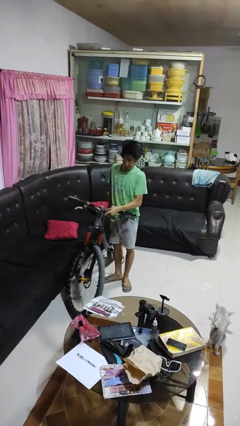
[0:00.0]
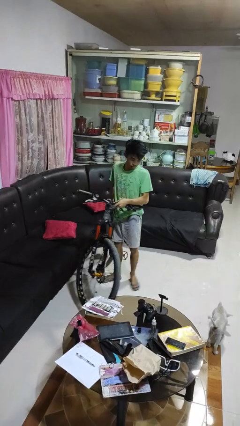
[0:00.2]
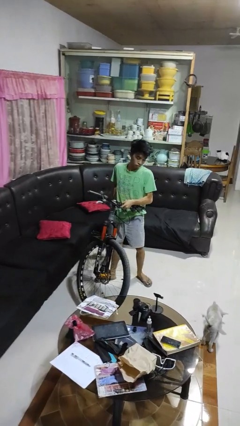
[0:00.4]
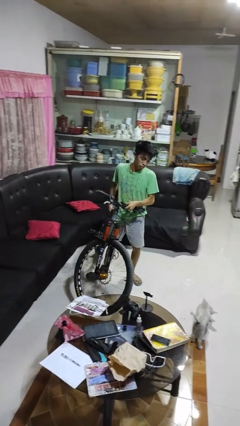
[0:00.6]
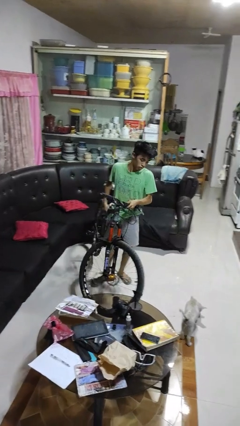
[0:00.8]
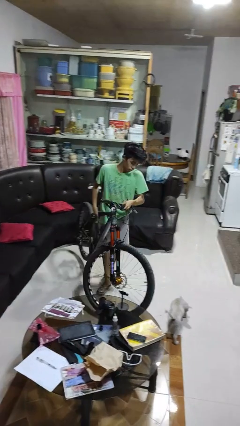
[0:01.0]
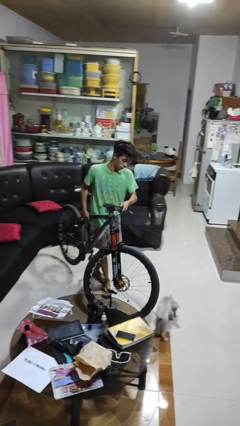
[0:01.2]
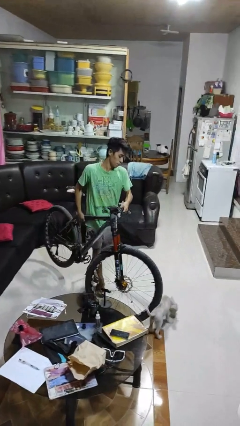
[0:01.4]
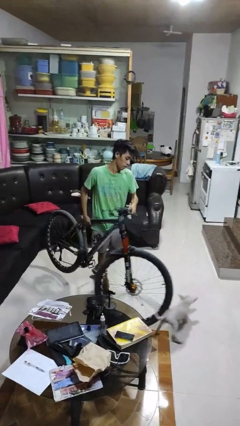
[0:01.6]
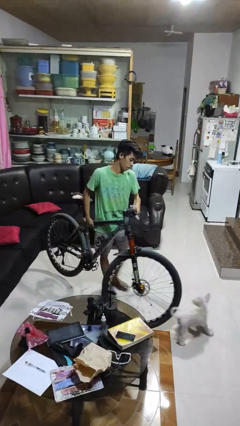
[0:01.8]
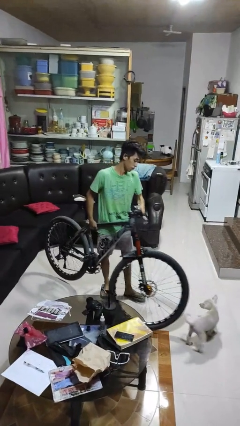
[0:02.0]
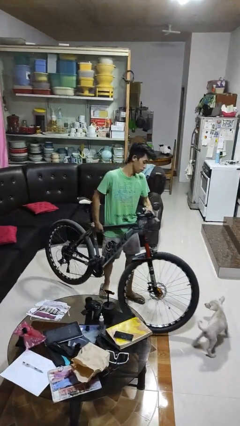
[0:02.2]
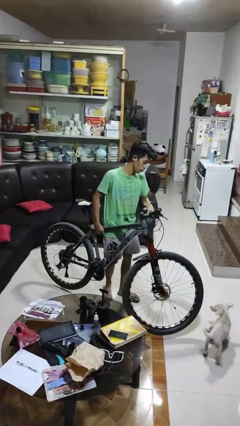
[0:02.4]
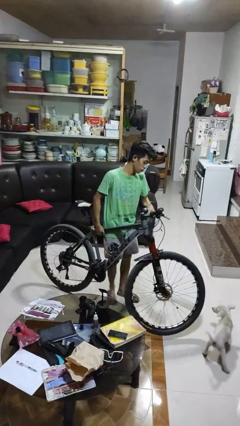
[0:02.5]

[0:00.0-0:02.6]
person carries bicycle

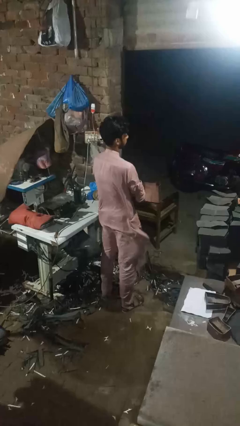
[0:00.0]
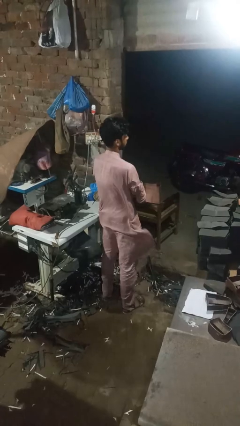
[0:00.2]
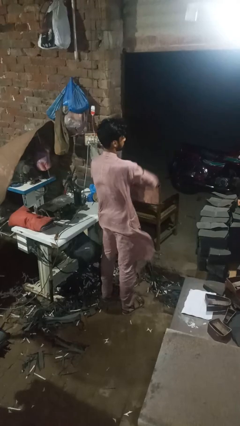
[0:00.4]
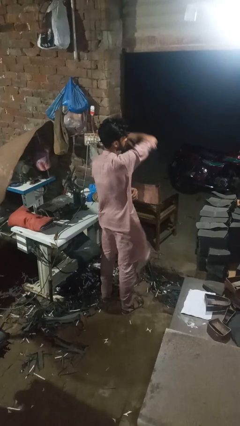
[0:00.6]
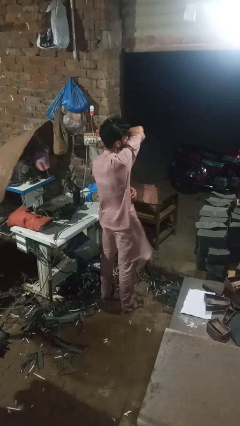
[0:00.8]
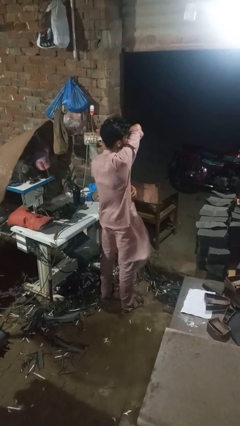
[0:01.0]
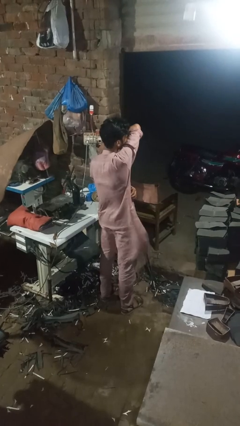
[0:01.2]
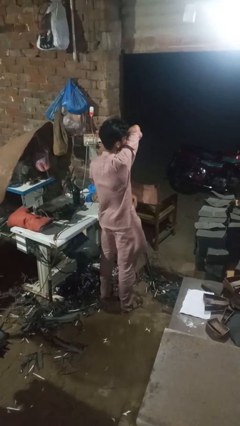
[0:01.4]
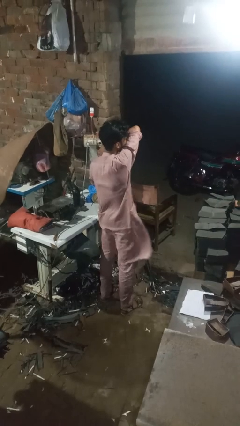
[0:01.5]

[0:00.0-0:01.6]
person sneezes into arm

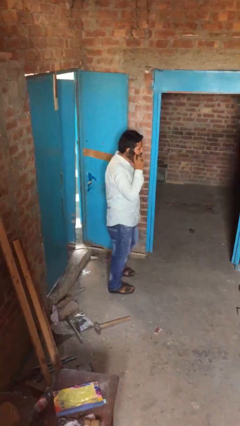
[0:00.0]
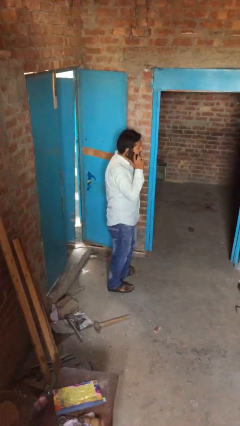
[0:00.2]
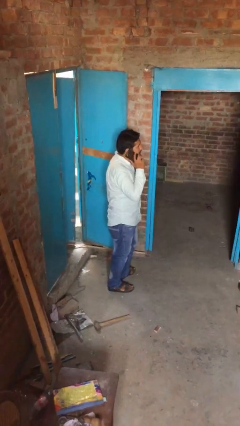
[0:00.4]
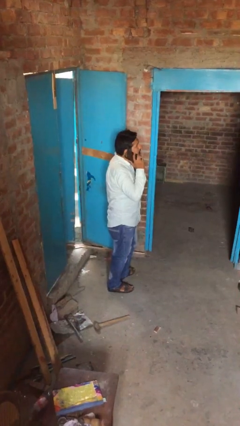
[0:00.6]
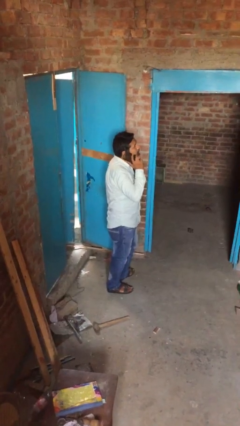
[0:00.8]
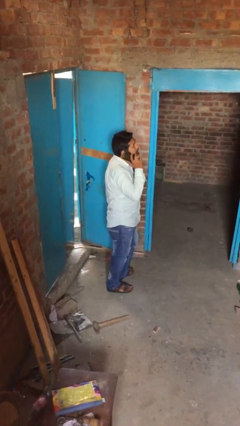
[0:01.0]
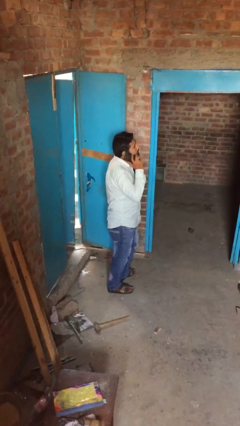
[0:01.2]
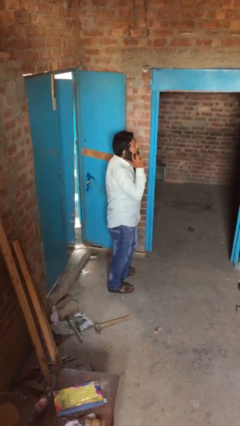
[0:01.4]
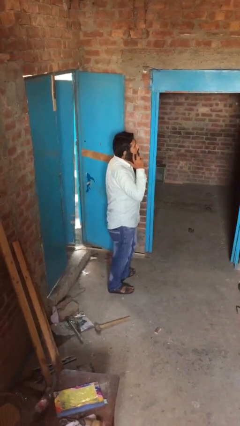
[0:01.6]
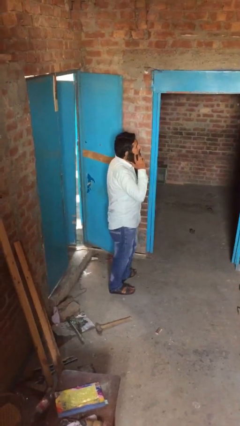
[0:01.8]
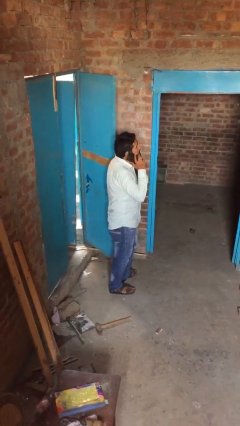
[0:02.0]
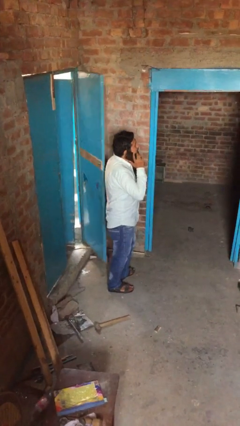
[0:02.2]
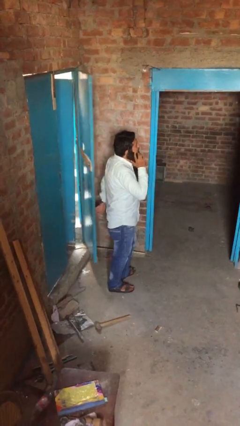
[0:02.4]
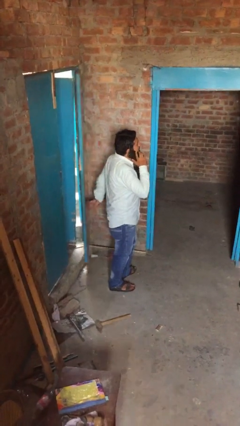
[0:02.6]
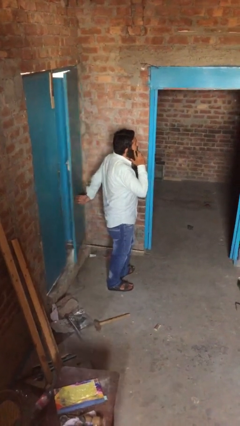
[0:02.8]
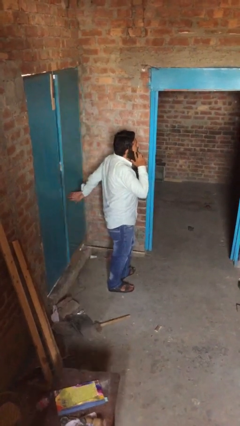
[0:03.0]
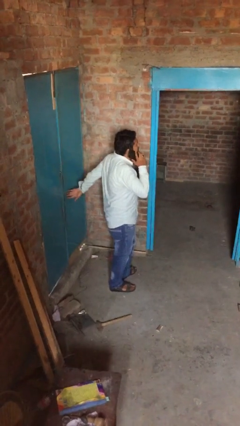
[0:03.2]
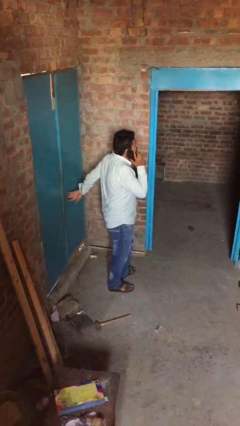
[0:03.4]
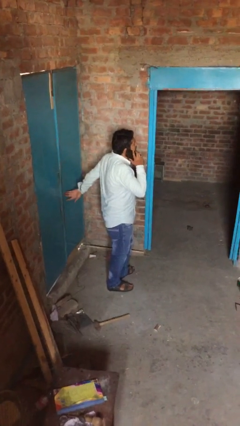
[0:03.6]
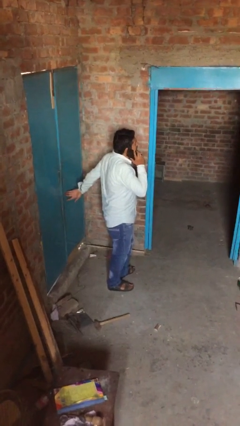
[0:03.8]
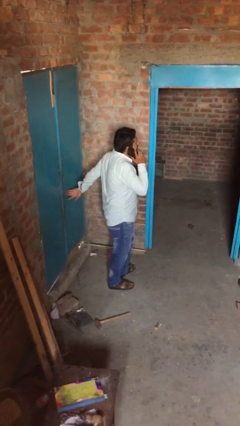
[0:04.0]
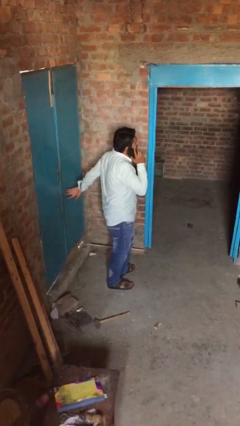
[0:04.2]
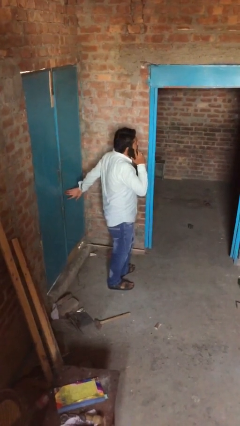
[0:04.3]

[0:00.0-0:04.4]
person closes facility door

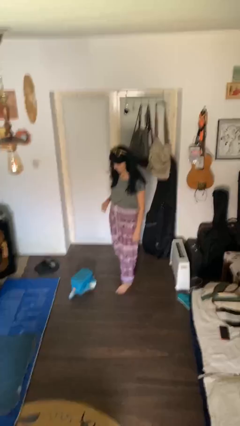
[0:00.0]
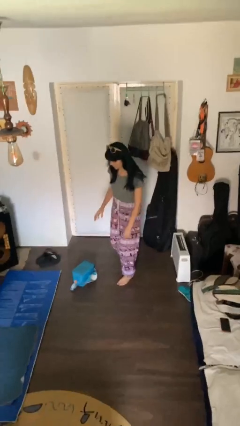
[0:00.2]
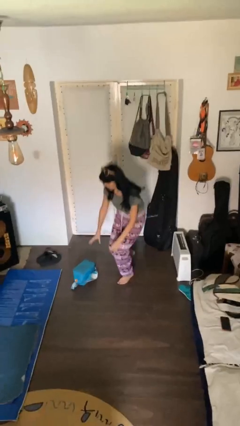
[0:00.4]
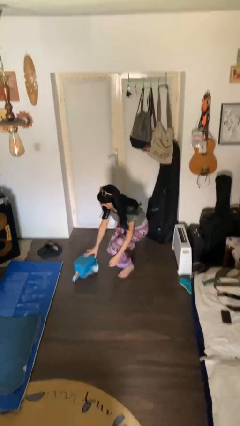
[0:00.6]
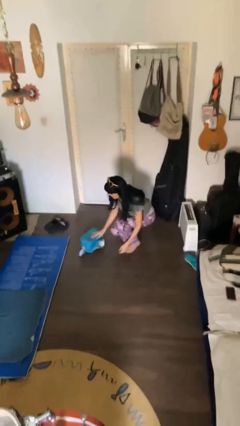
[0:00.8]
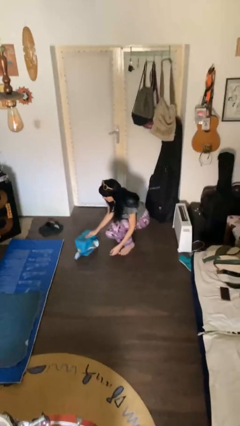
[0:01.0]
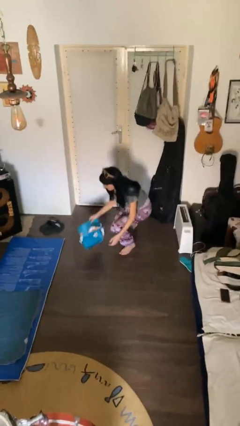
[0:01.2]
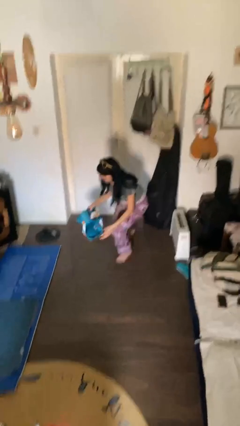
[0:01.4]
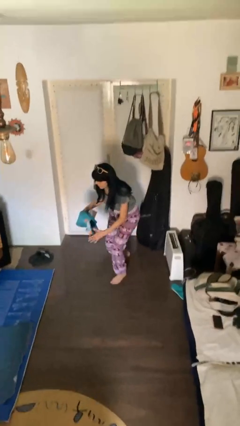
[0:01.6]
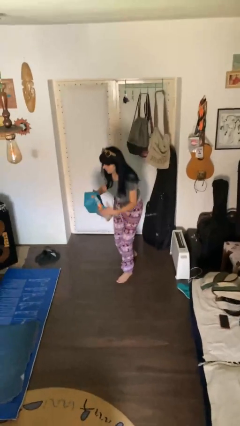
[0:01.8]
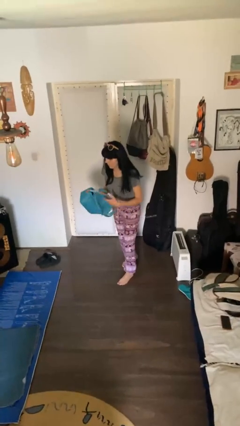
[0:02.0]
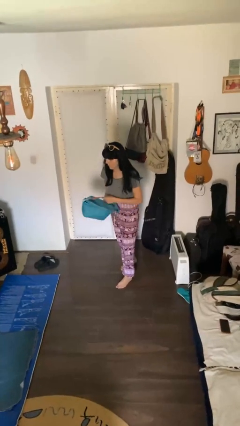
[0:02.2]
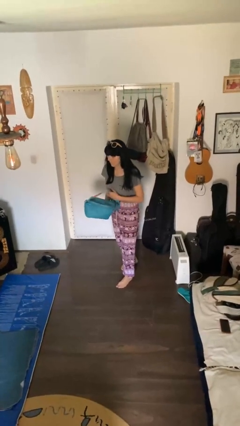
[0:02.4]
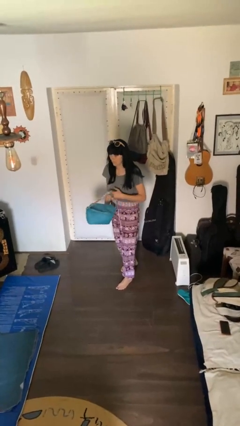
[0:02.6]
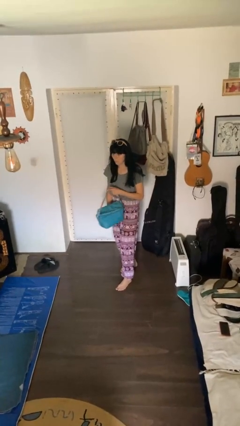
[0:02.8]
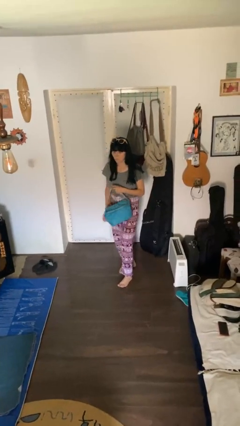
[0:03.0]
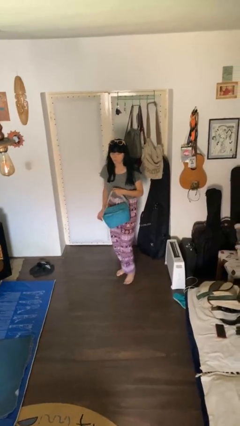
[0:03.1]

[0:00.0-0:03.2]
person picks up object from floor

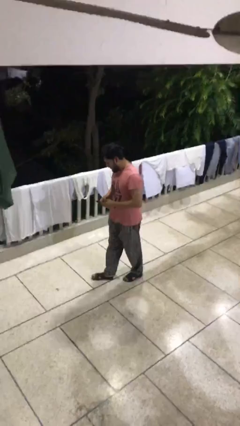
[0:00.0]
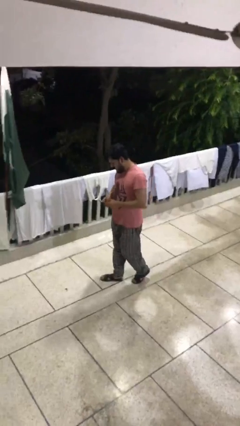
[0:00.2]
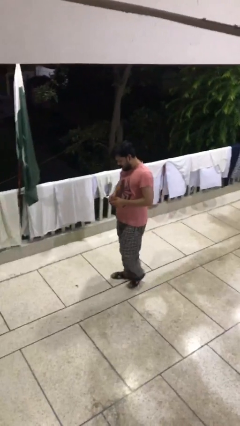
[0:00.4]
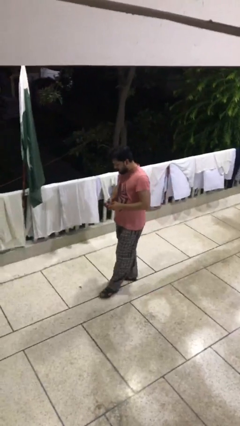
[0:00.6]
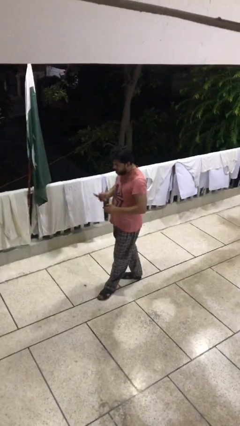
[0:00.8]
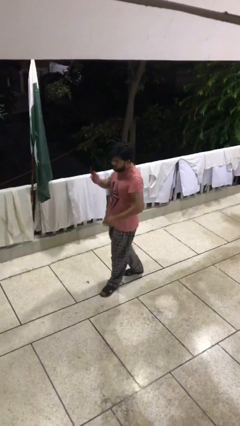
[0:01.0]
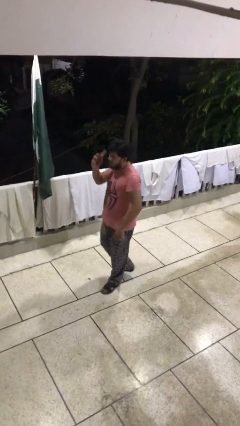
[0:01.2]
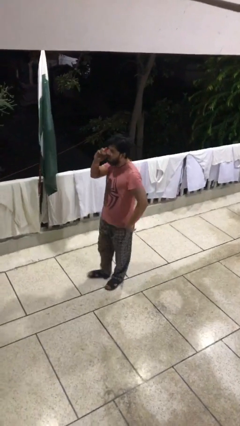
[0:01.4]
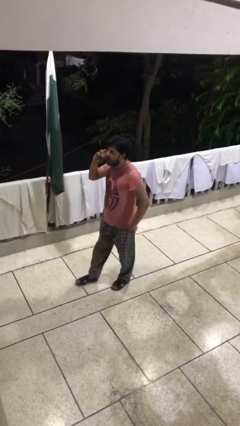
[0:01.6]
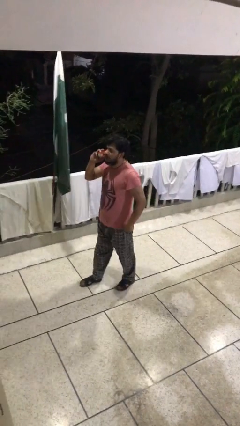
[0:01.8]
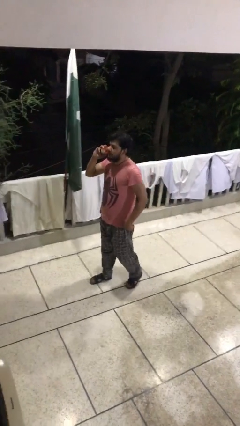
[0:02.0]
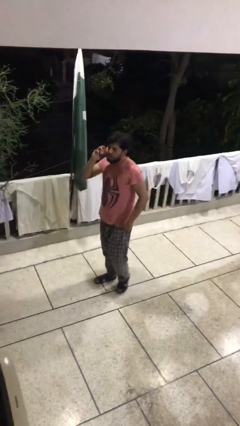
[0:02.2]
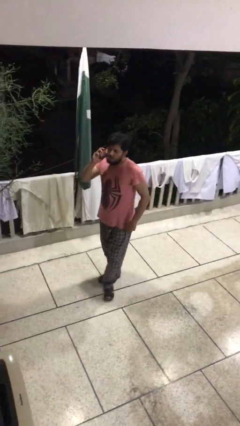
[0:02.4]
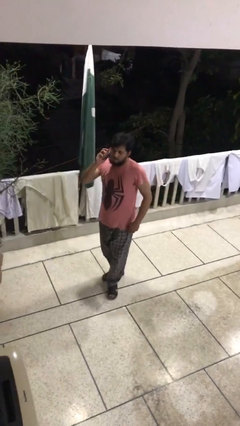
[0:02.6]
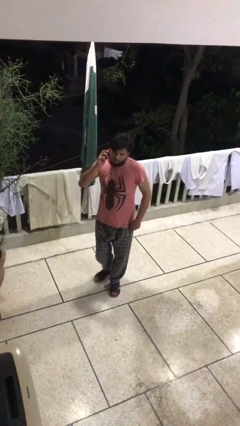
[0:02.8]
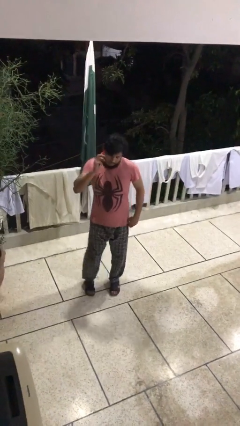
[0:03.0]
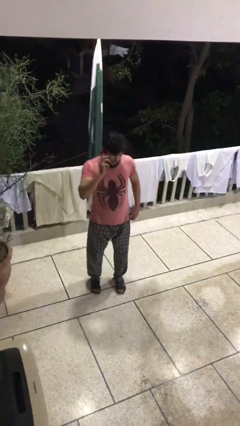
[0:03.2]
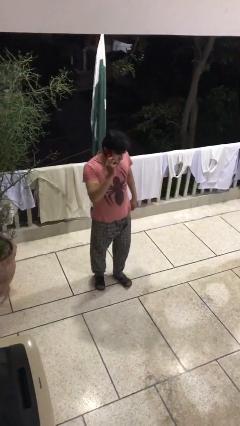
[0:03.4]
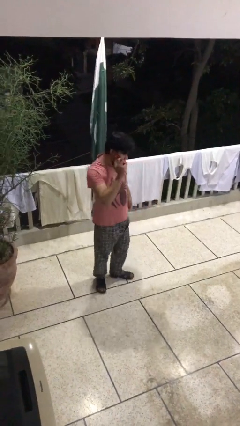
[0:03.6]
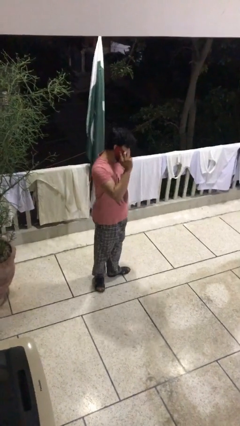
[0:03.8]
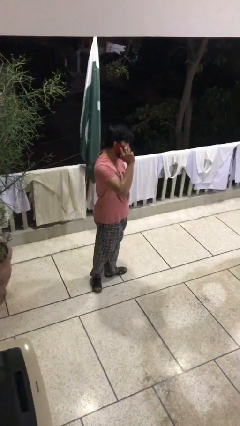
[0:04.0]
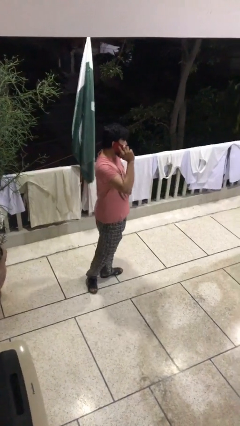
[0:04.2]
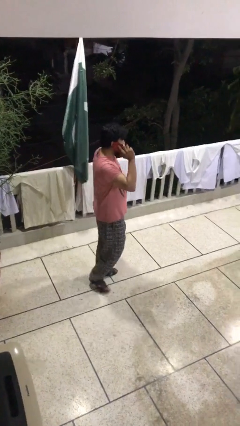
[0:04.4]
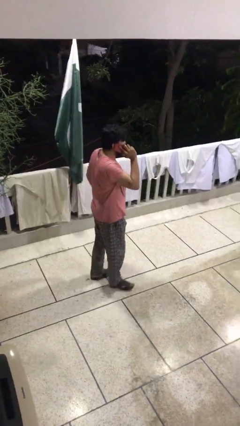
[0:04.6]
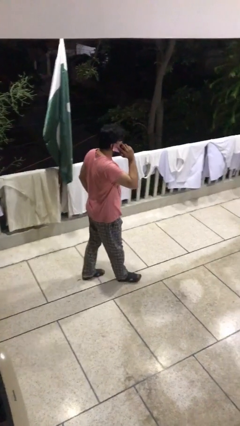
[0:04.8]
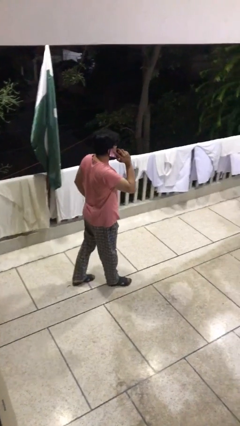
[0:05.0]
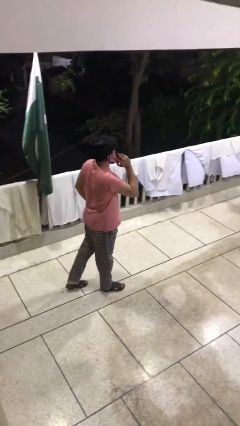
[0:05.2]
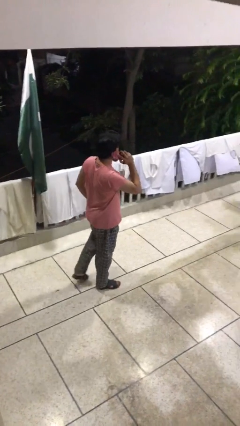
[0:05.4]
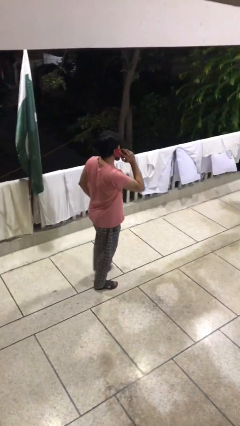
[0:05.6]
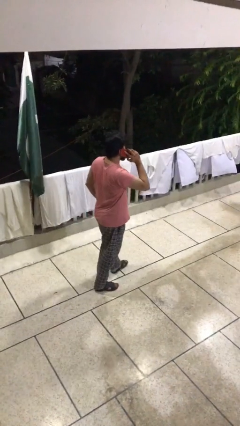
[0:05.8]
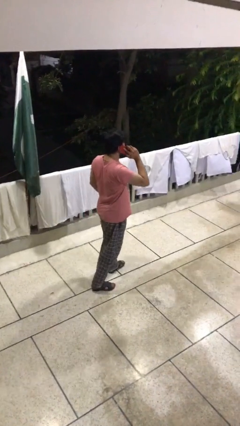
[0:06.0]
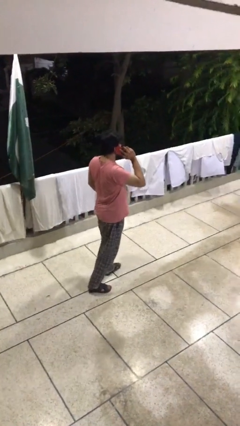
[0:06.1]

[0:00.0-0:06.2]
person talks on phone
